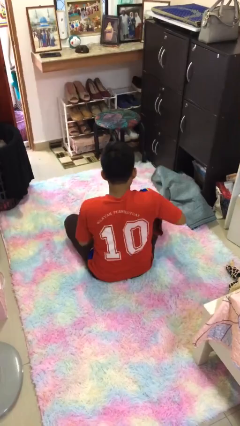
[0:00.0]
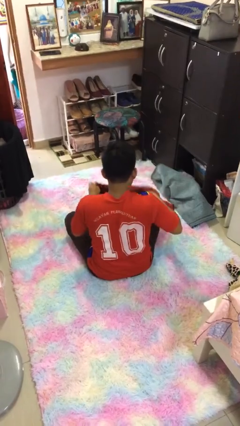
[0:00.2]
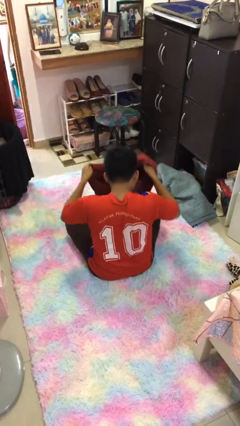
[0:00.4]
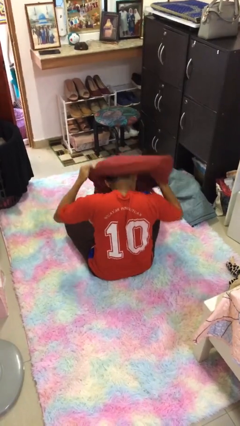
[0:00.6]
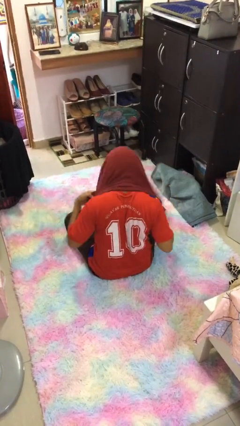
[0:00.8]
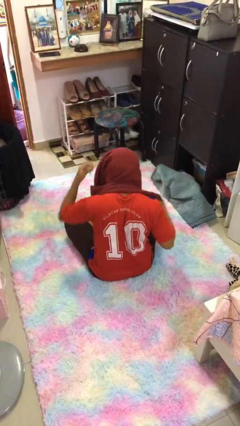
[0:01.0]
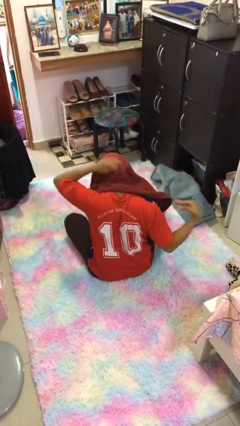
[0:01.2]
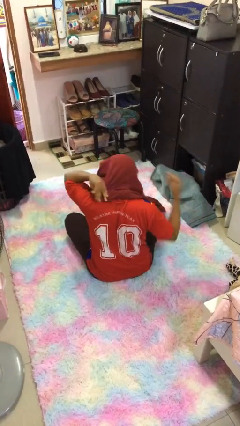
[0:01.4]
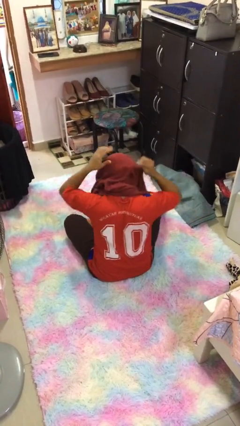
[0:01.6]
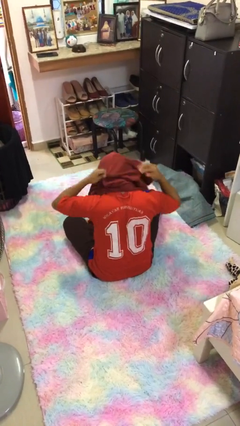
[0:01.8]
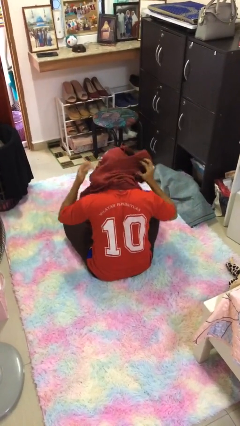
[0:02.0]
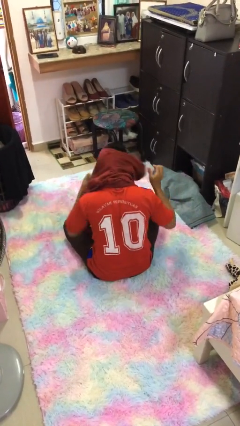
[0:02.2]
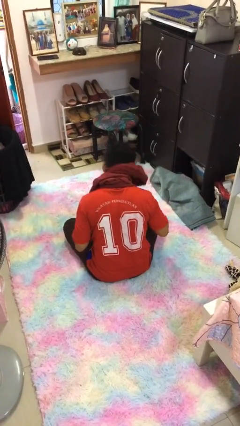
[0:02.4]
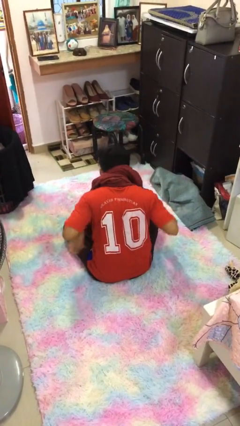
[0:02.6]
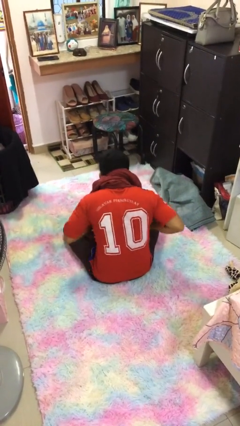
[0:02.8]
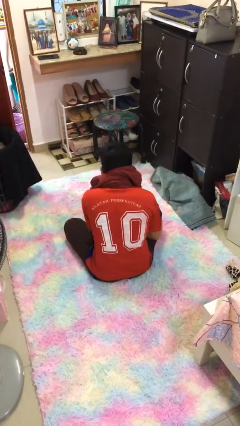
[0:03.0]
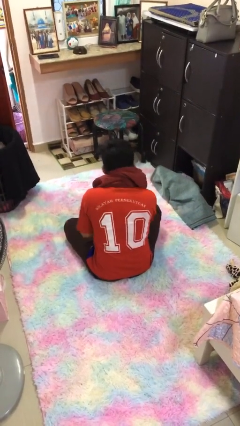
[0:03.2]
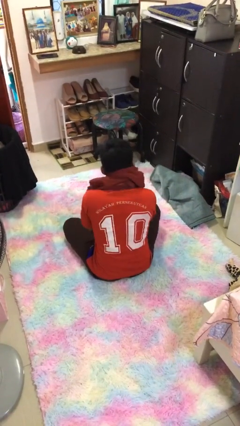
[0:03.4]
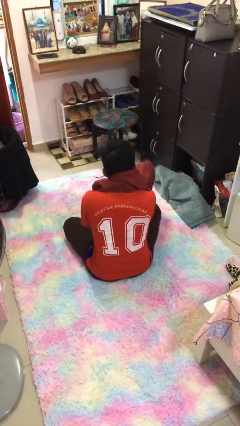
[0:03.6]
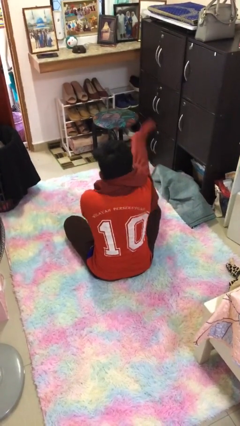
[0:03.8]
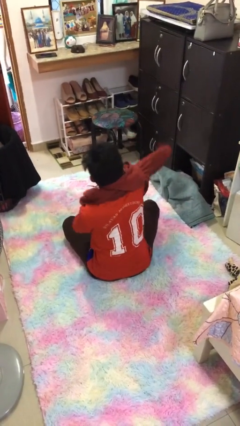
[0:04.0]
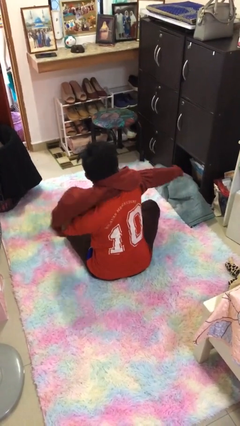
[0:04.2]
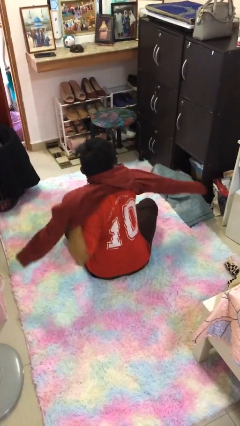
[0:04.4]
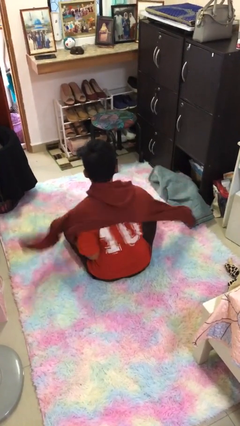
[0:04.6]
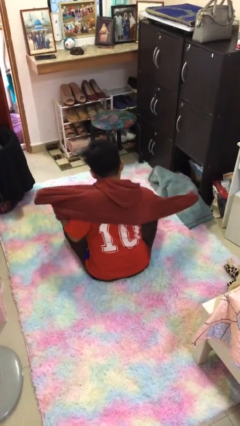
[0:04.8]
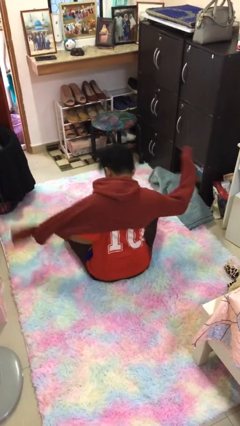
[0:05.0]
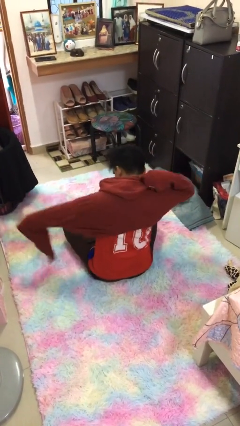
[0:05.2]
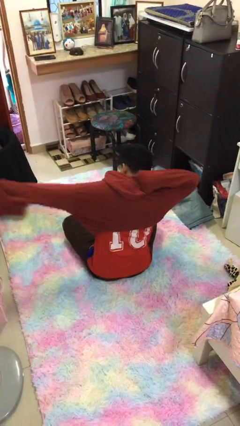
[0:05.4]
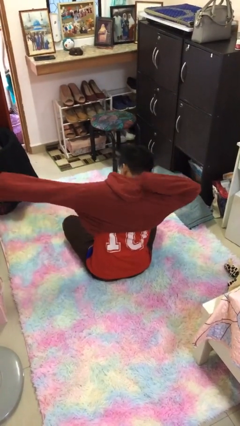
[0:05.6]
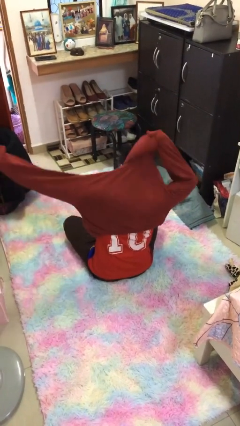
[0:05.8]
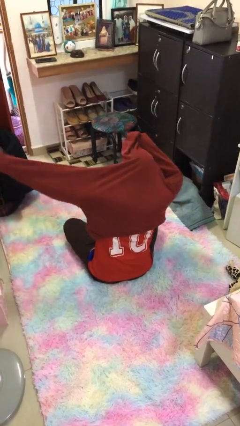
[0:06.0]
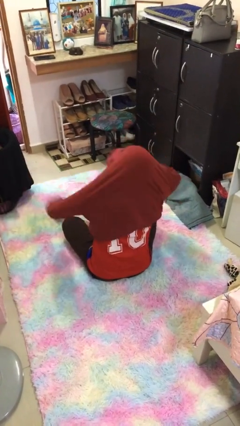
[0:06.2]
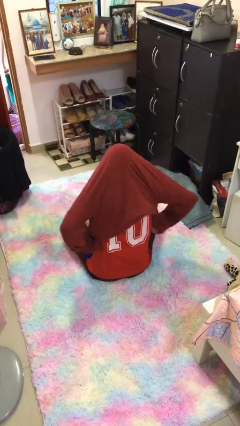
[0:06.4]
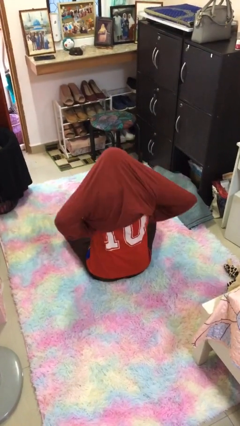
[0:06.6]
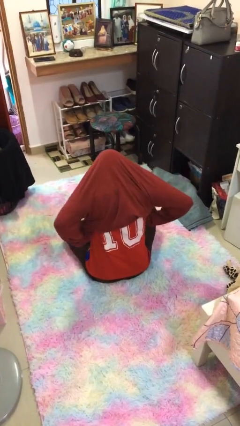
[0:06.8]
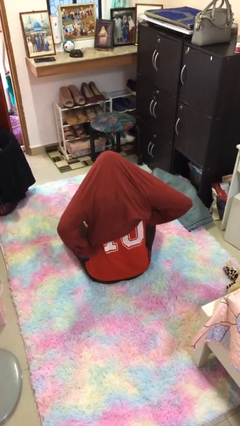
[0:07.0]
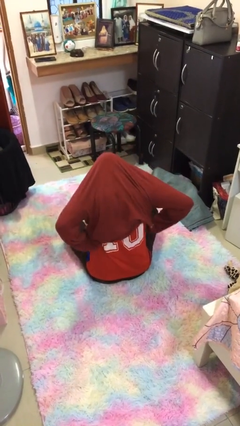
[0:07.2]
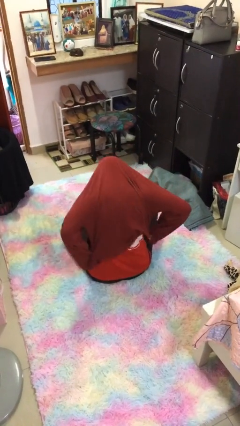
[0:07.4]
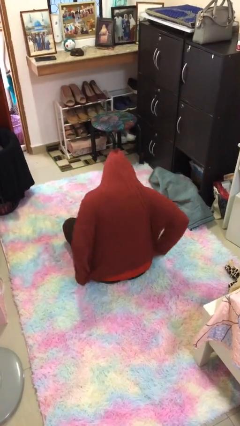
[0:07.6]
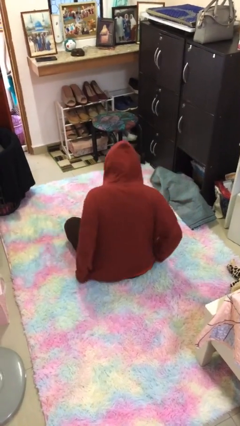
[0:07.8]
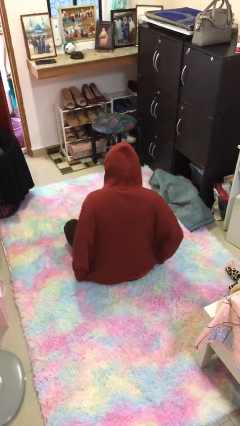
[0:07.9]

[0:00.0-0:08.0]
person puts on hoodie

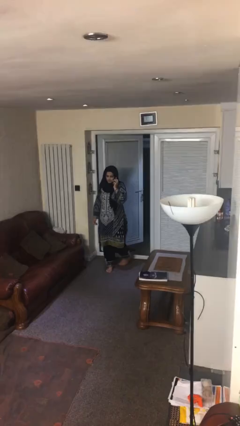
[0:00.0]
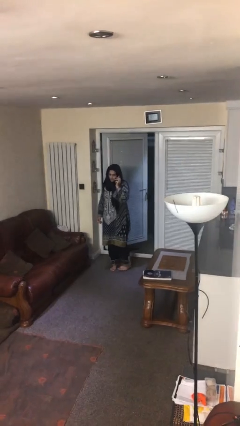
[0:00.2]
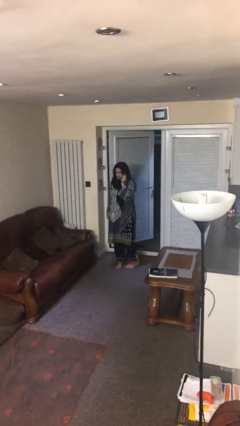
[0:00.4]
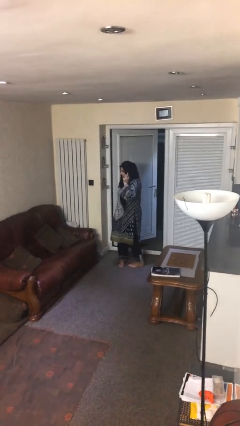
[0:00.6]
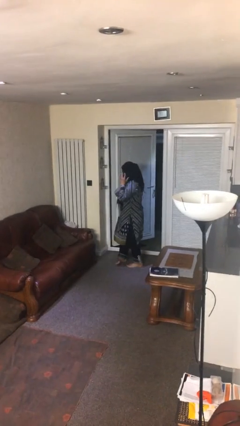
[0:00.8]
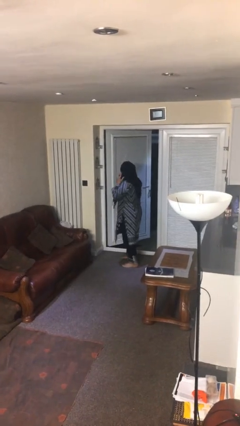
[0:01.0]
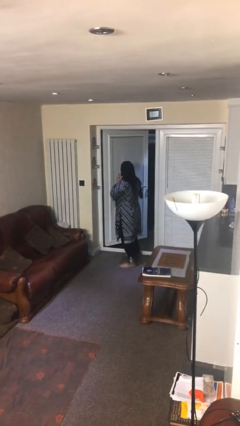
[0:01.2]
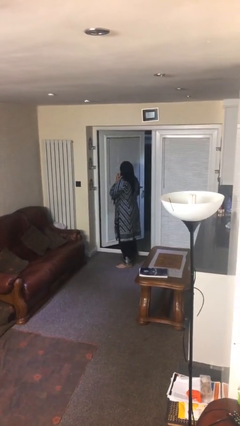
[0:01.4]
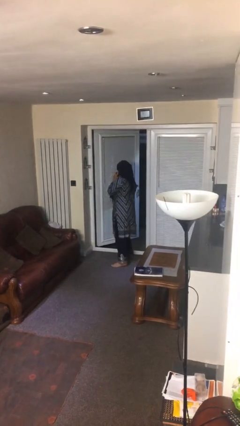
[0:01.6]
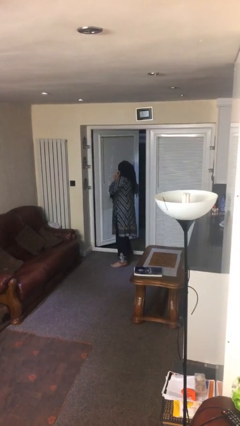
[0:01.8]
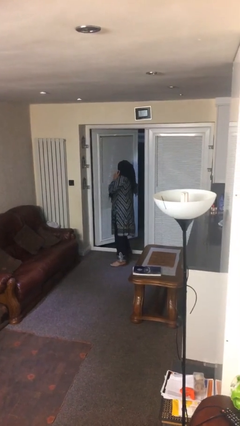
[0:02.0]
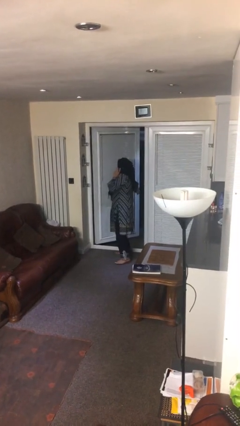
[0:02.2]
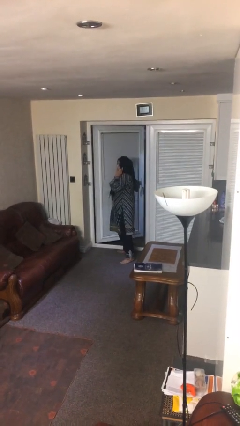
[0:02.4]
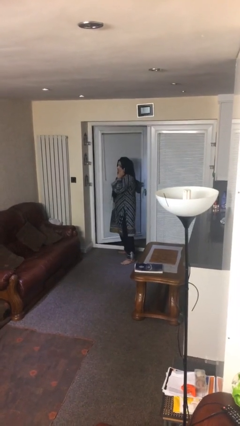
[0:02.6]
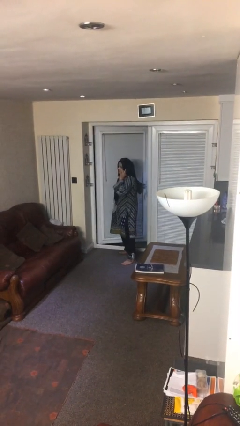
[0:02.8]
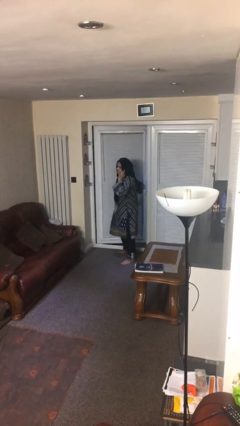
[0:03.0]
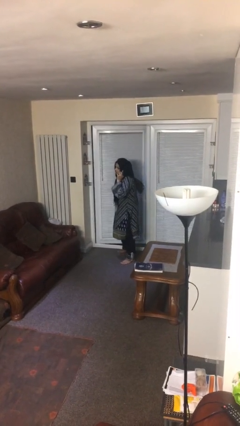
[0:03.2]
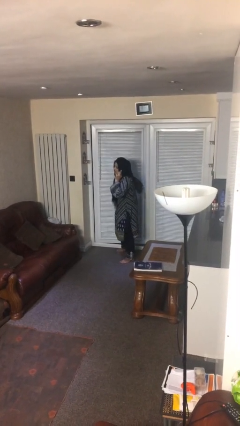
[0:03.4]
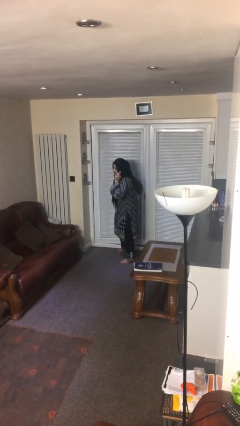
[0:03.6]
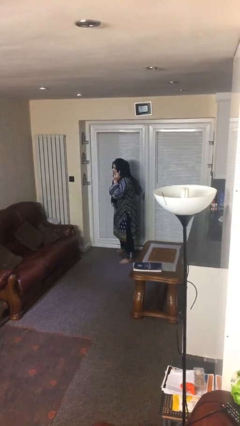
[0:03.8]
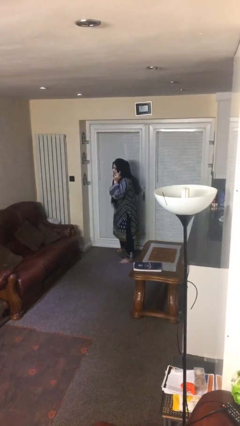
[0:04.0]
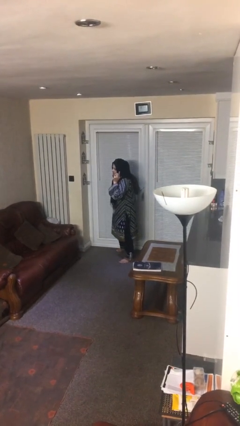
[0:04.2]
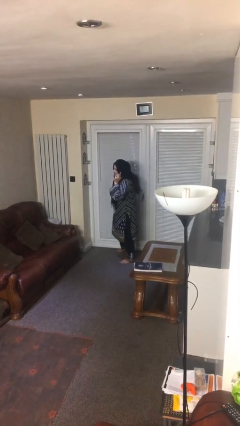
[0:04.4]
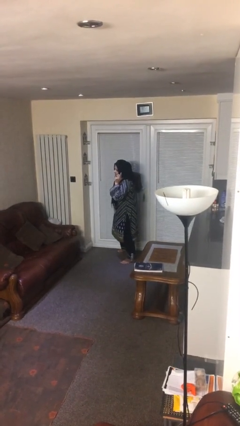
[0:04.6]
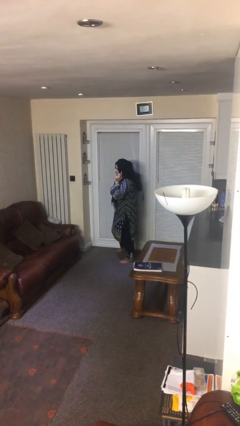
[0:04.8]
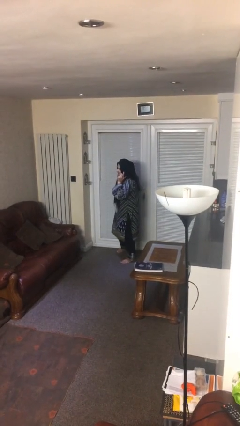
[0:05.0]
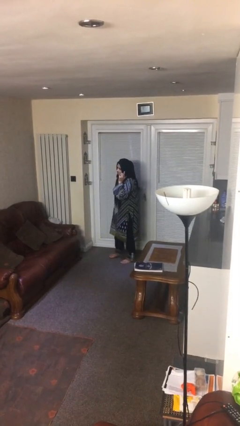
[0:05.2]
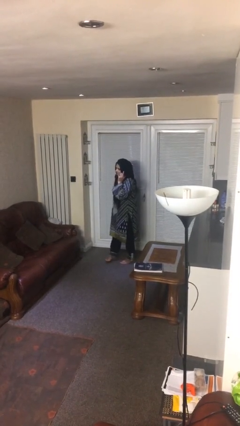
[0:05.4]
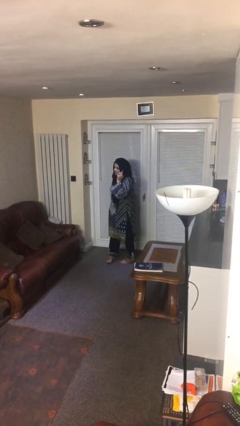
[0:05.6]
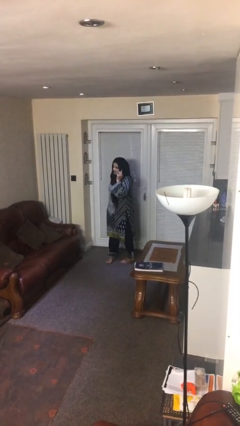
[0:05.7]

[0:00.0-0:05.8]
person closes facility door

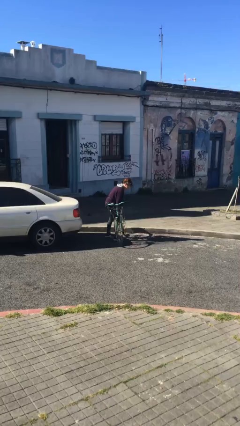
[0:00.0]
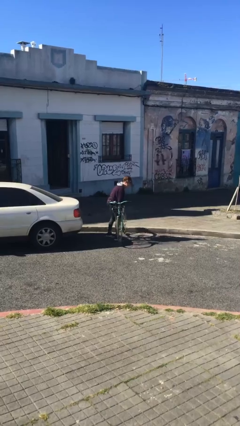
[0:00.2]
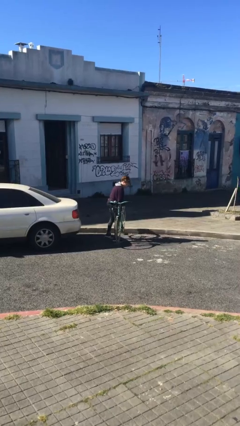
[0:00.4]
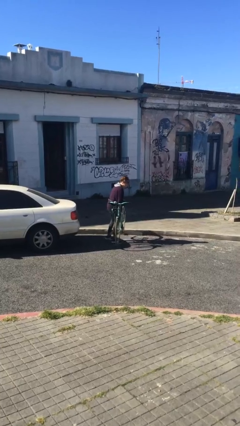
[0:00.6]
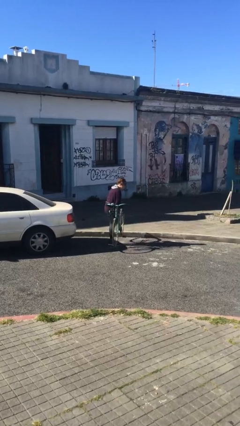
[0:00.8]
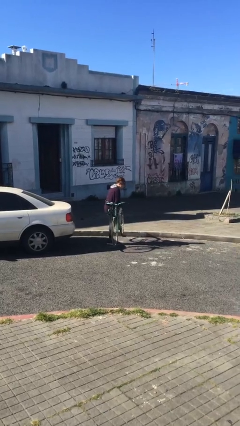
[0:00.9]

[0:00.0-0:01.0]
person picks up object from floor

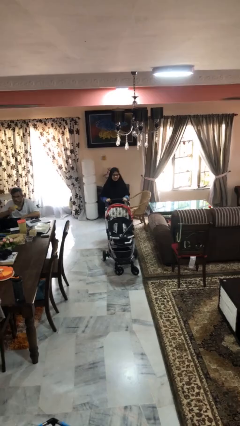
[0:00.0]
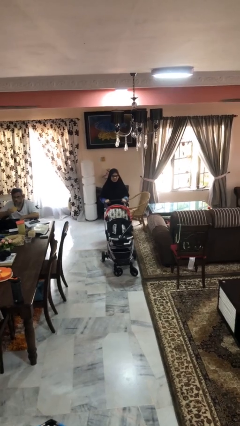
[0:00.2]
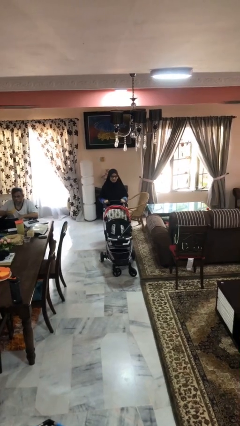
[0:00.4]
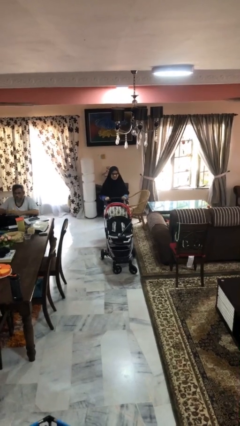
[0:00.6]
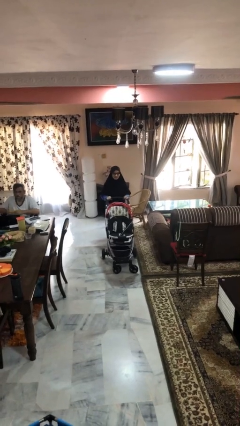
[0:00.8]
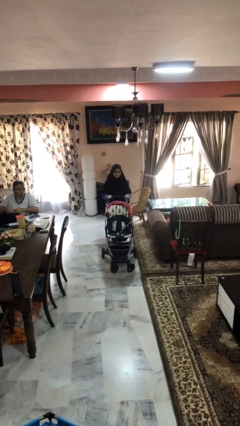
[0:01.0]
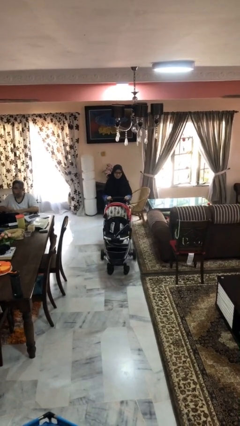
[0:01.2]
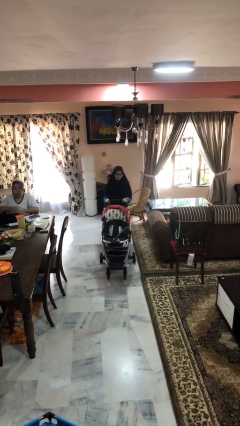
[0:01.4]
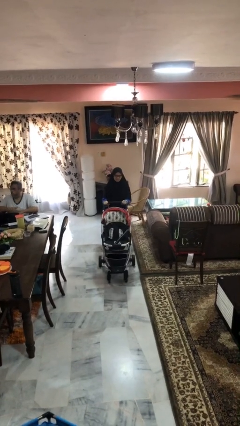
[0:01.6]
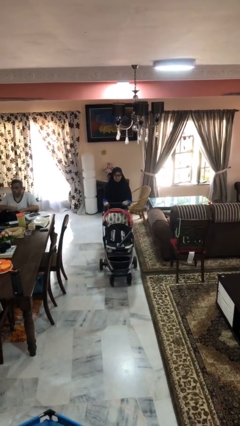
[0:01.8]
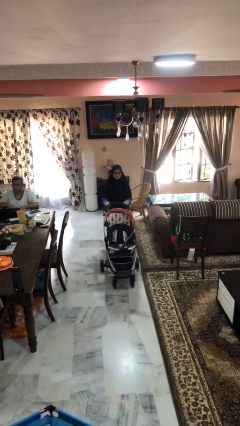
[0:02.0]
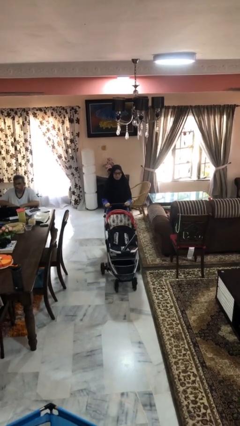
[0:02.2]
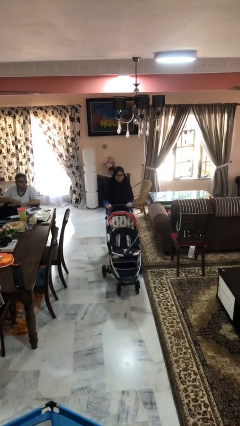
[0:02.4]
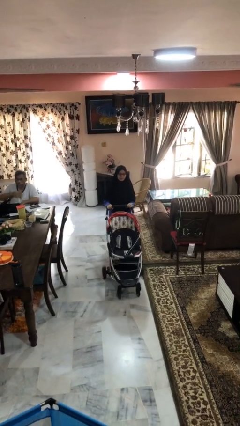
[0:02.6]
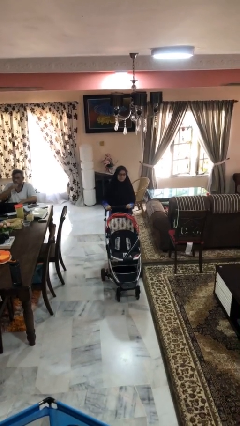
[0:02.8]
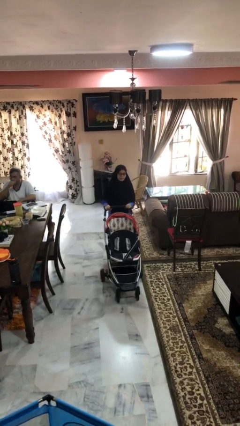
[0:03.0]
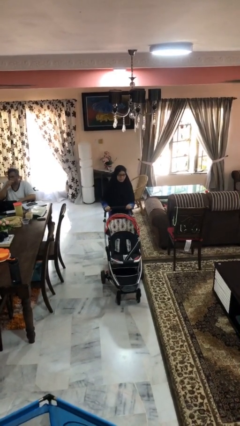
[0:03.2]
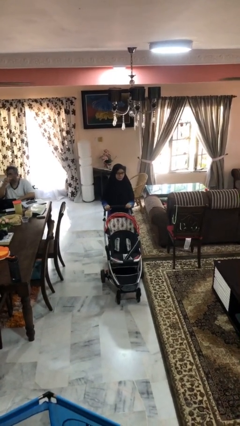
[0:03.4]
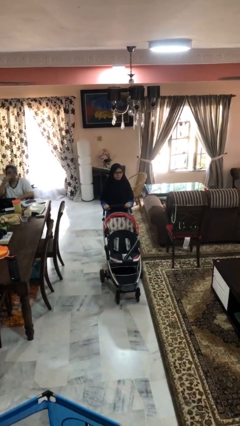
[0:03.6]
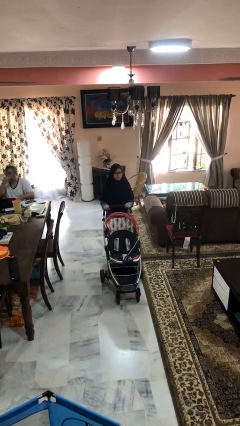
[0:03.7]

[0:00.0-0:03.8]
person pushes wheeled cart
